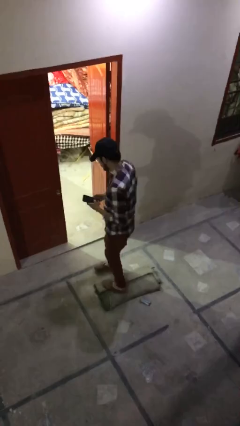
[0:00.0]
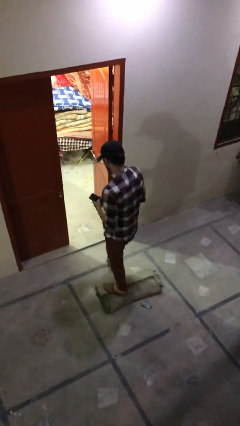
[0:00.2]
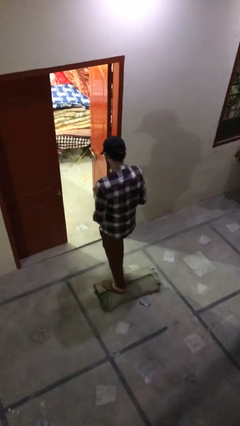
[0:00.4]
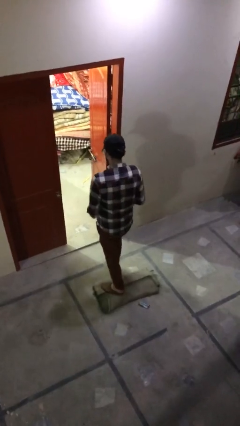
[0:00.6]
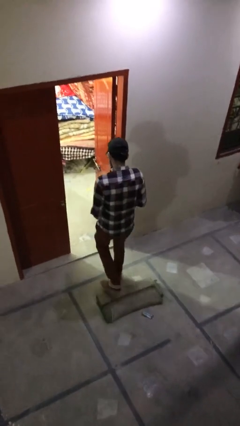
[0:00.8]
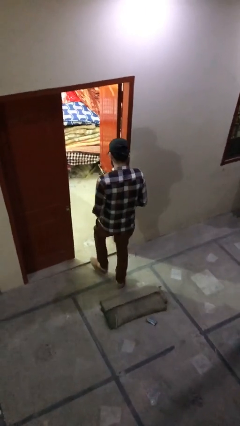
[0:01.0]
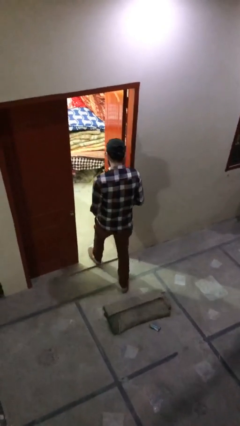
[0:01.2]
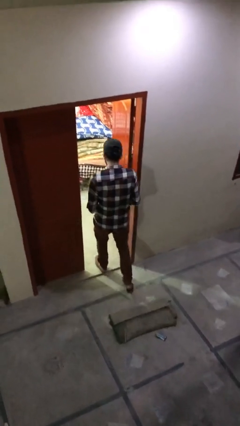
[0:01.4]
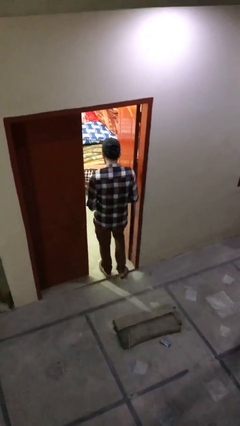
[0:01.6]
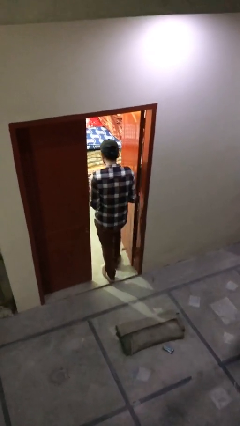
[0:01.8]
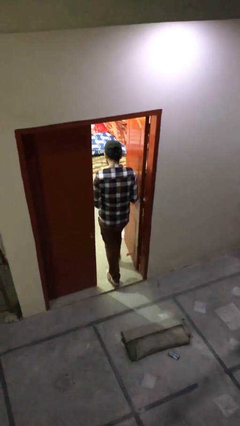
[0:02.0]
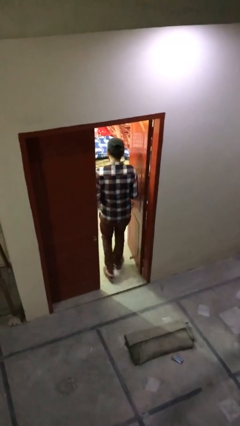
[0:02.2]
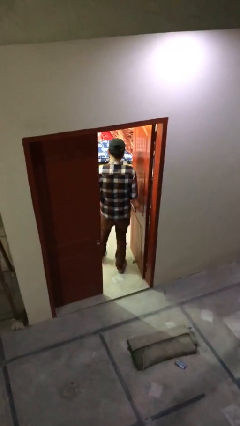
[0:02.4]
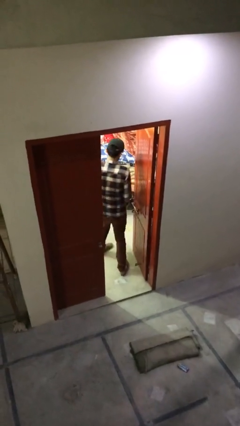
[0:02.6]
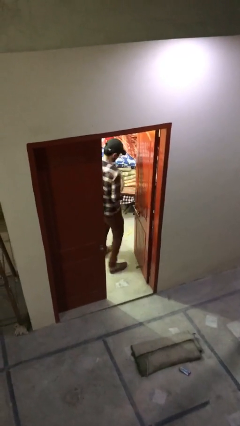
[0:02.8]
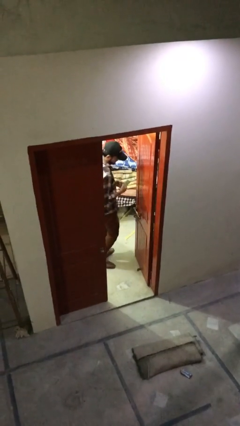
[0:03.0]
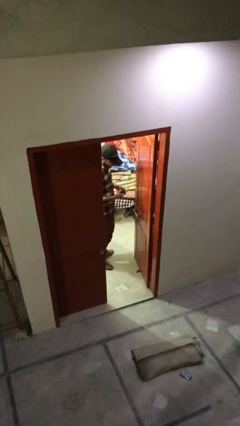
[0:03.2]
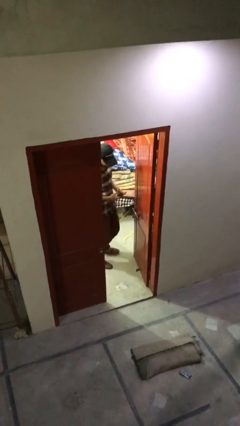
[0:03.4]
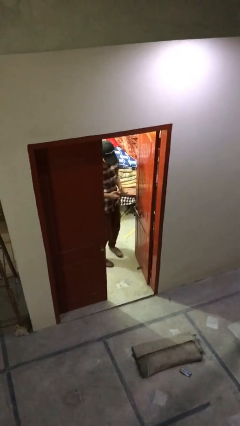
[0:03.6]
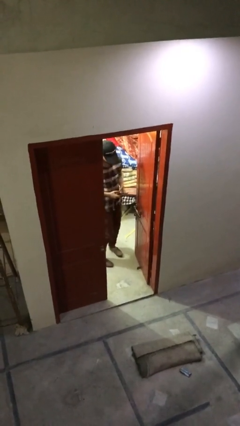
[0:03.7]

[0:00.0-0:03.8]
person exits scene through structure

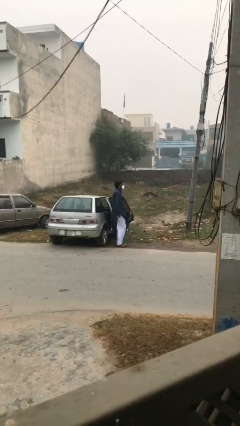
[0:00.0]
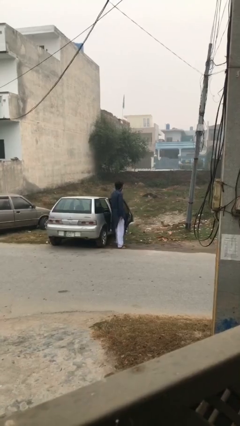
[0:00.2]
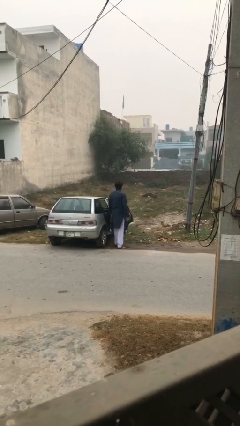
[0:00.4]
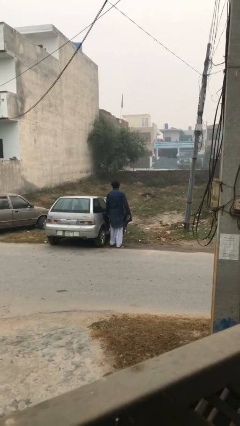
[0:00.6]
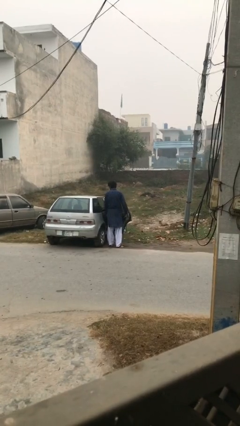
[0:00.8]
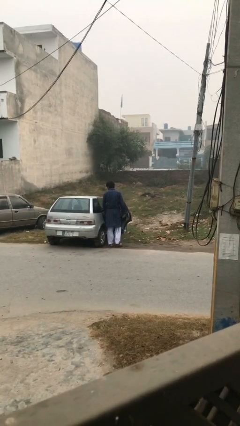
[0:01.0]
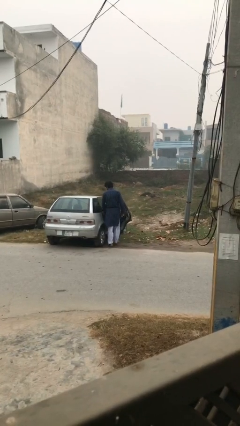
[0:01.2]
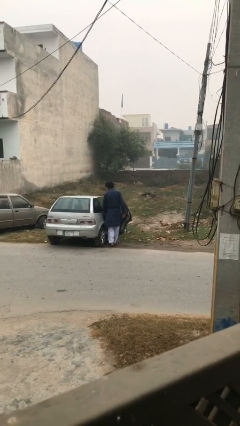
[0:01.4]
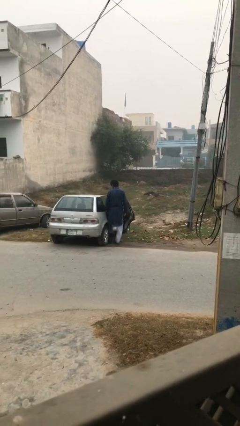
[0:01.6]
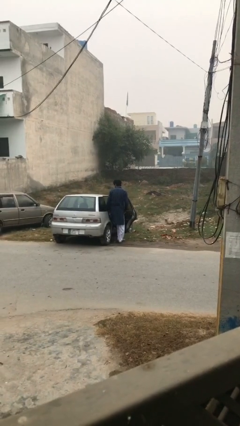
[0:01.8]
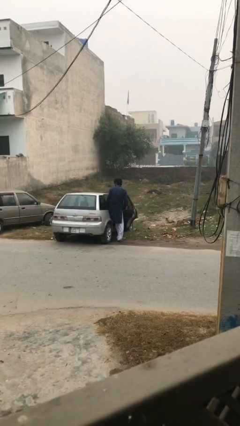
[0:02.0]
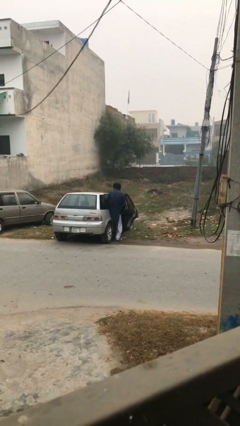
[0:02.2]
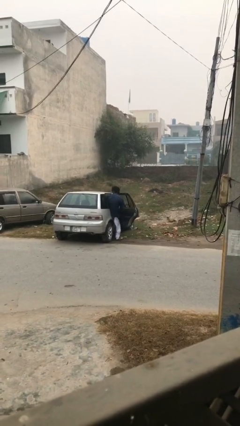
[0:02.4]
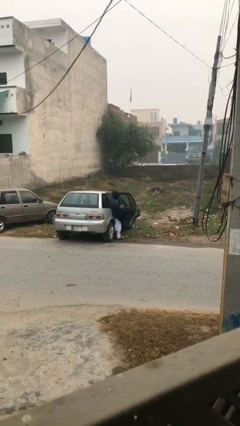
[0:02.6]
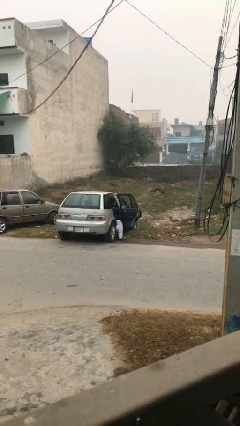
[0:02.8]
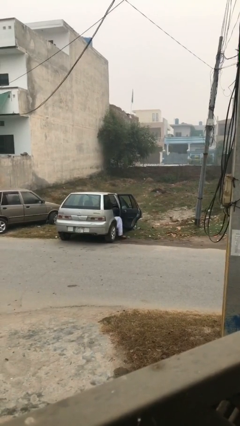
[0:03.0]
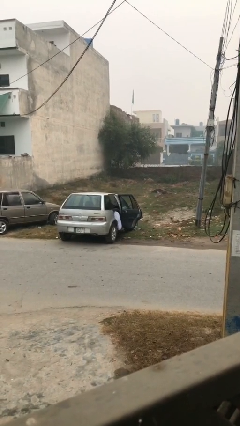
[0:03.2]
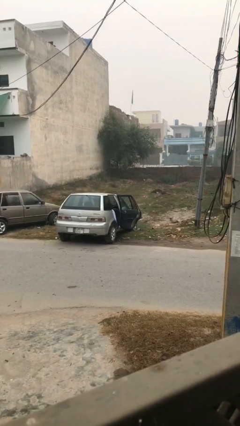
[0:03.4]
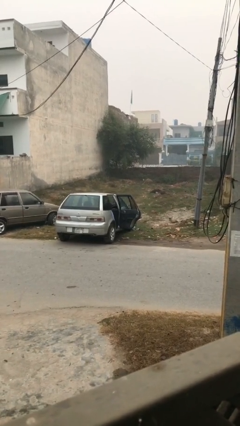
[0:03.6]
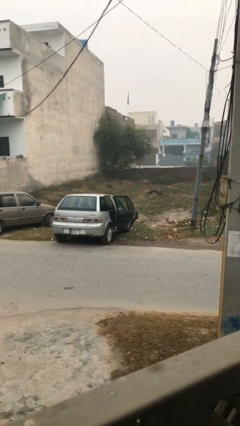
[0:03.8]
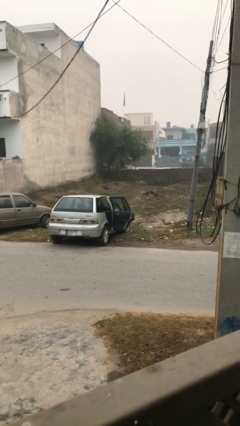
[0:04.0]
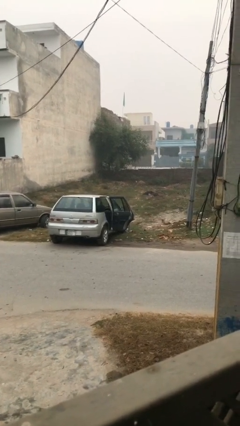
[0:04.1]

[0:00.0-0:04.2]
person enters car

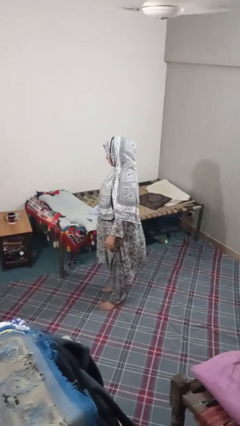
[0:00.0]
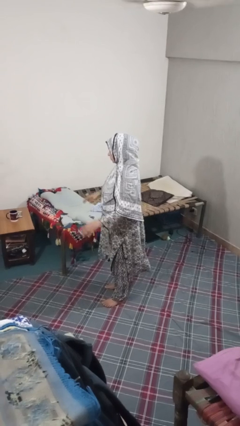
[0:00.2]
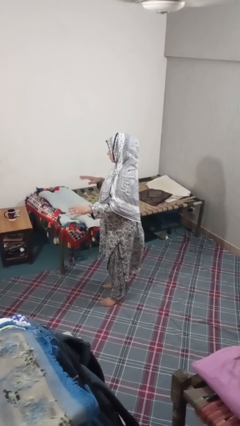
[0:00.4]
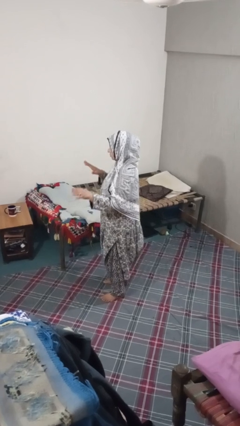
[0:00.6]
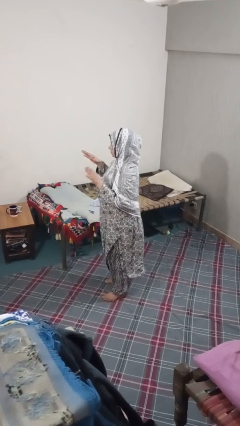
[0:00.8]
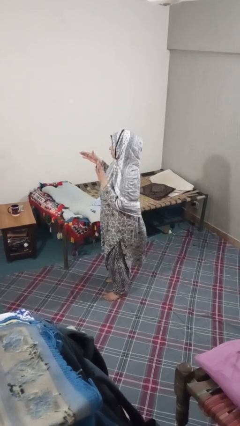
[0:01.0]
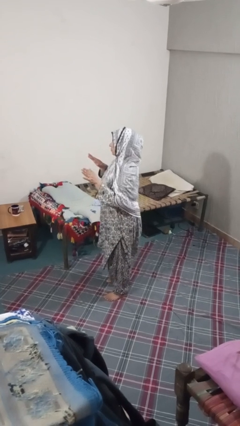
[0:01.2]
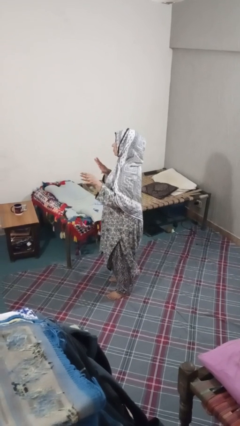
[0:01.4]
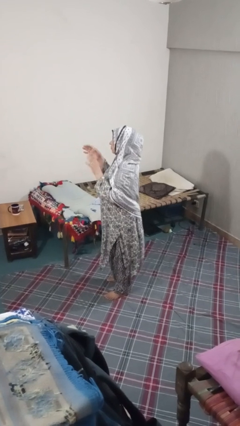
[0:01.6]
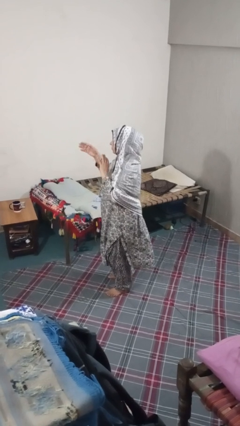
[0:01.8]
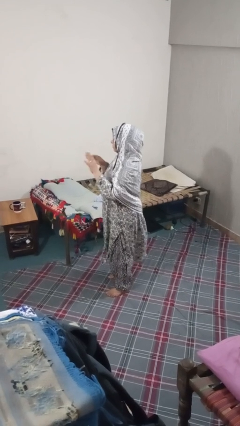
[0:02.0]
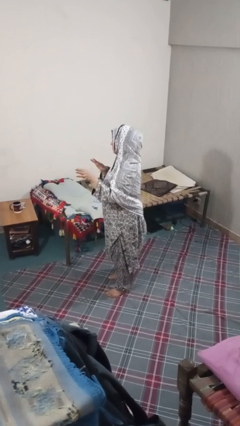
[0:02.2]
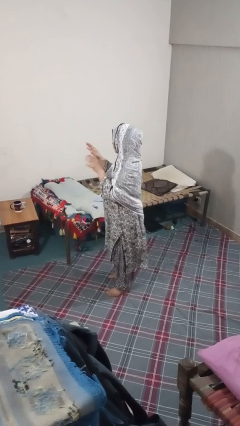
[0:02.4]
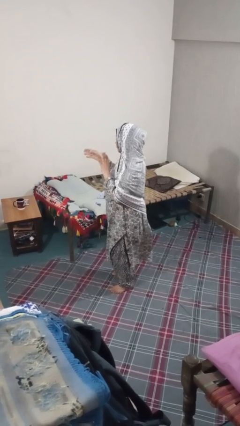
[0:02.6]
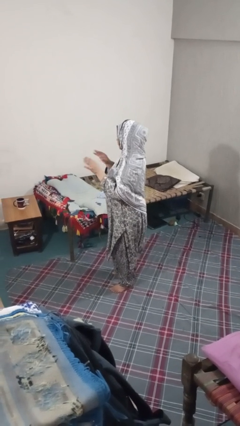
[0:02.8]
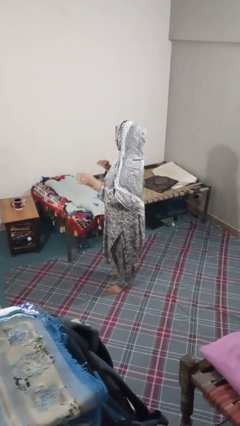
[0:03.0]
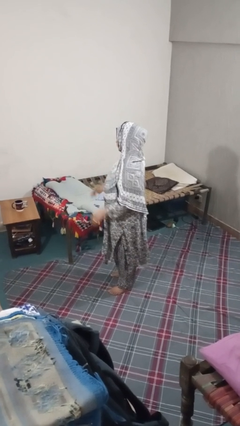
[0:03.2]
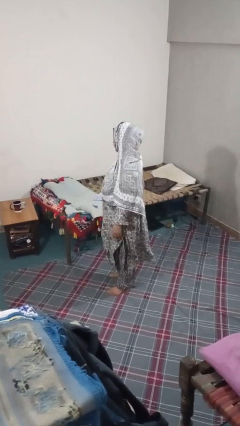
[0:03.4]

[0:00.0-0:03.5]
person dances in place

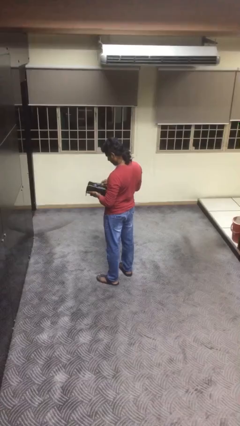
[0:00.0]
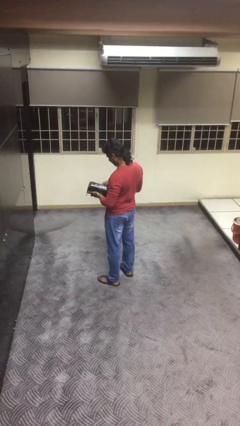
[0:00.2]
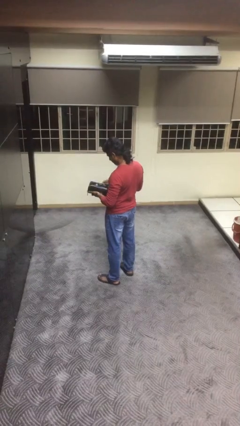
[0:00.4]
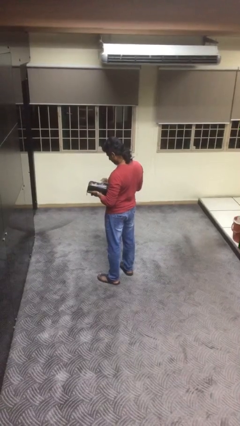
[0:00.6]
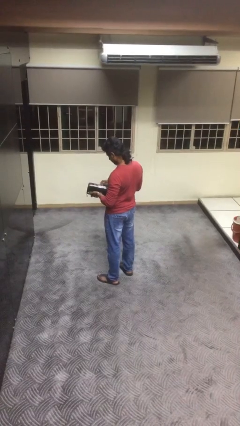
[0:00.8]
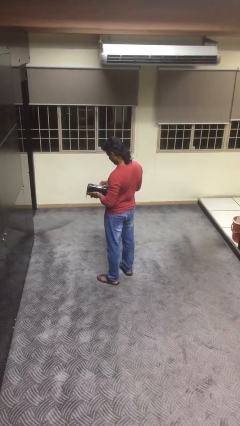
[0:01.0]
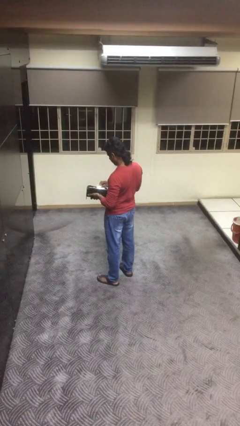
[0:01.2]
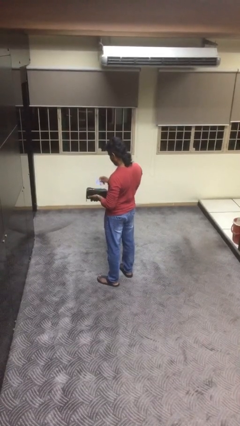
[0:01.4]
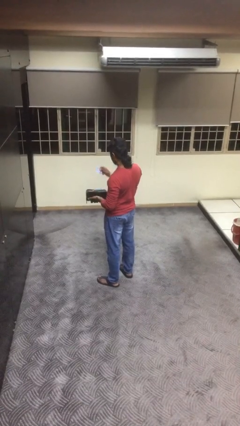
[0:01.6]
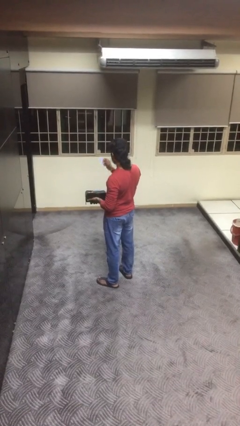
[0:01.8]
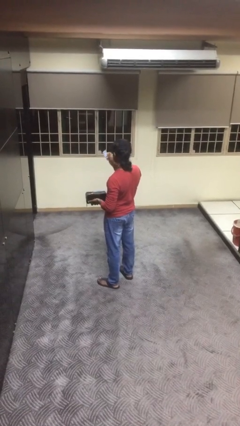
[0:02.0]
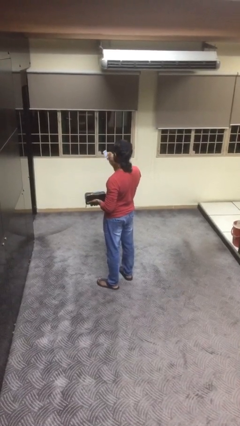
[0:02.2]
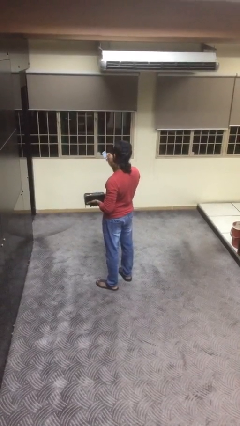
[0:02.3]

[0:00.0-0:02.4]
person takes object from purse

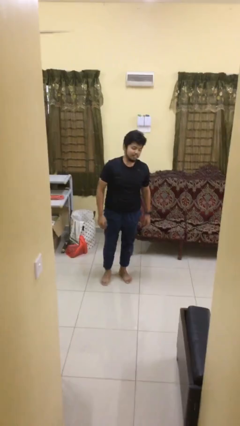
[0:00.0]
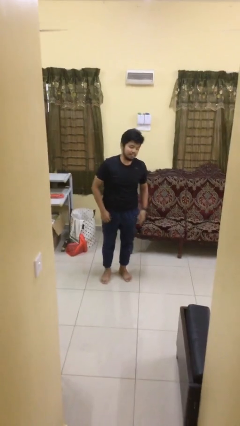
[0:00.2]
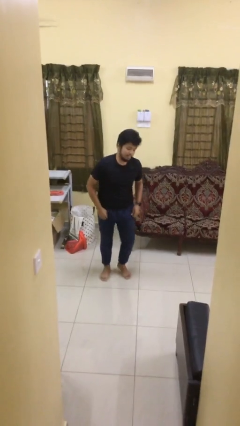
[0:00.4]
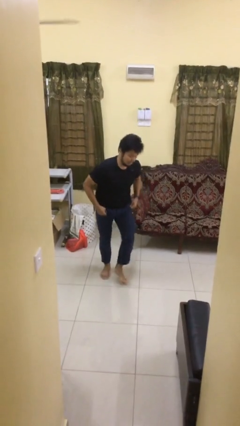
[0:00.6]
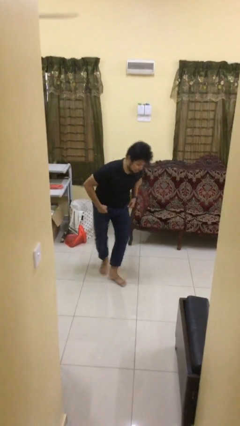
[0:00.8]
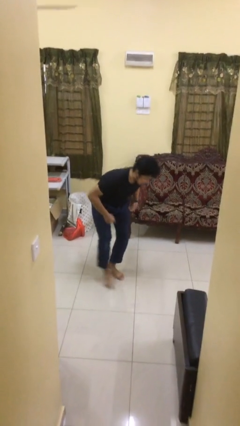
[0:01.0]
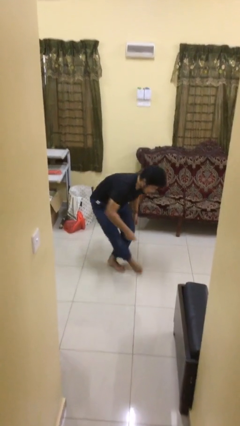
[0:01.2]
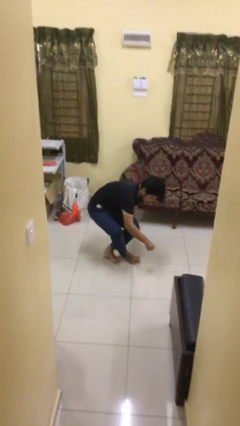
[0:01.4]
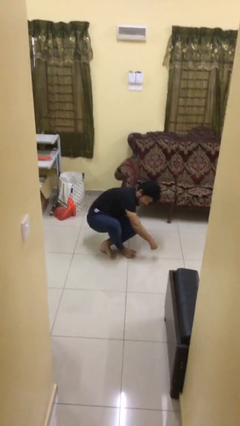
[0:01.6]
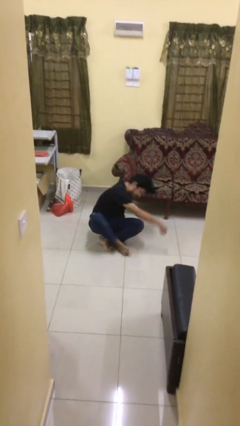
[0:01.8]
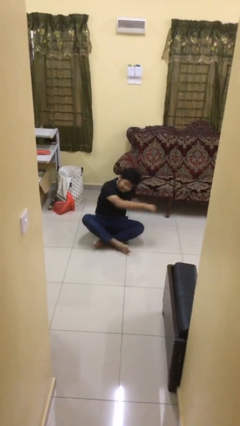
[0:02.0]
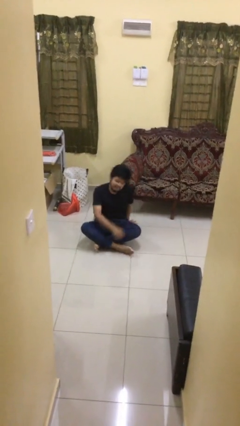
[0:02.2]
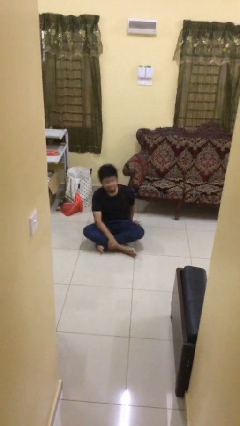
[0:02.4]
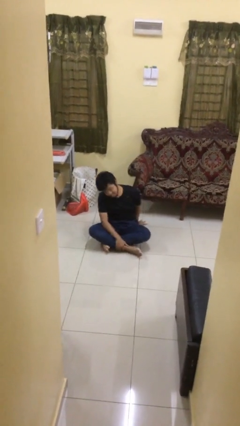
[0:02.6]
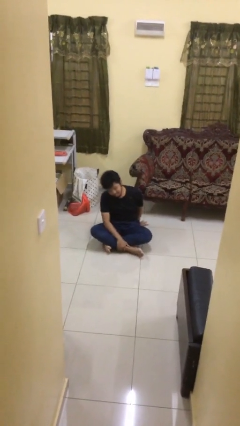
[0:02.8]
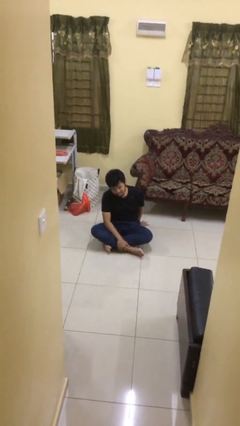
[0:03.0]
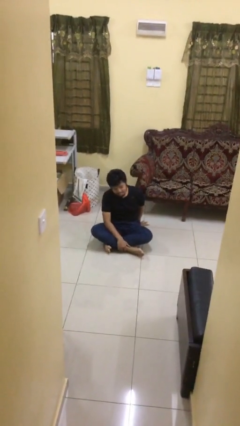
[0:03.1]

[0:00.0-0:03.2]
person sits crisscross

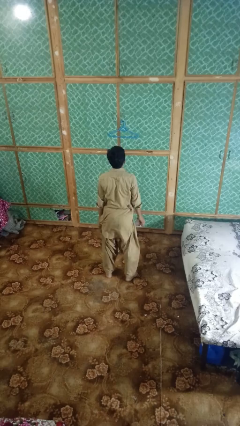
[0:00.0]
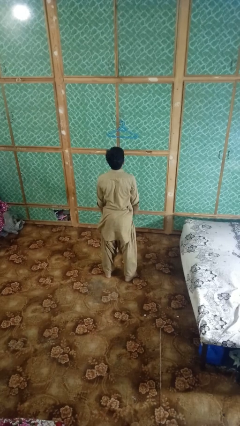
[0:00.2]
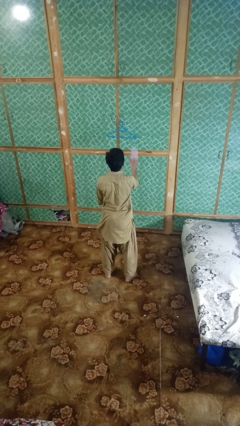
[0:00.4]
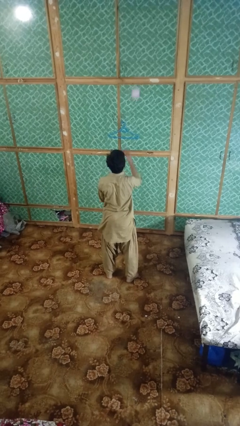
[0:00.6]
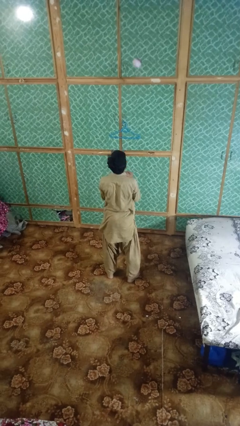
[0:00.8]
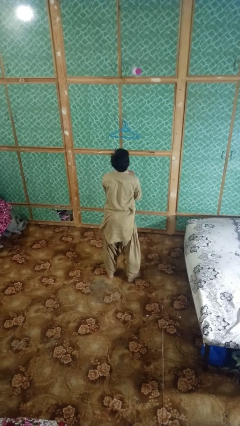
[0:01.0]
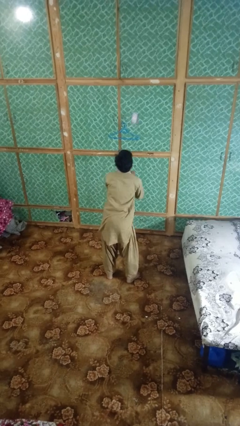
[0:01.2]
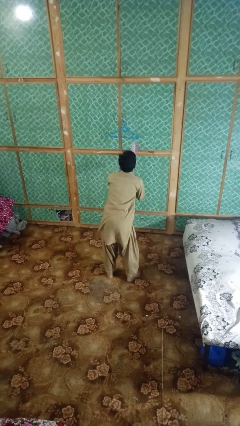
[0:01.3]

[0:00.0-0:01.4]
person drops object
